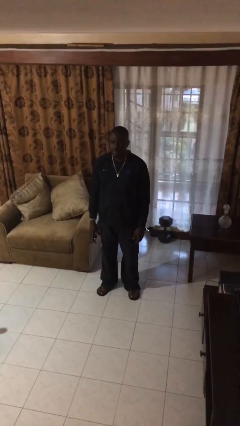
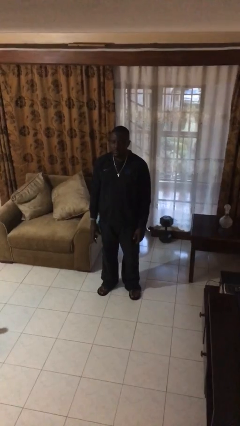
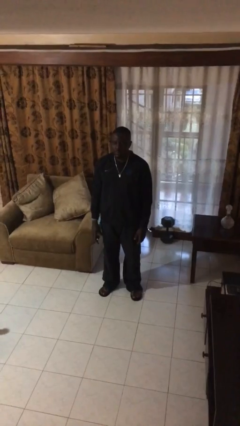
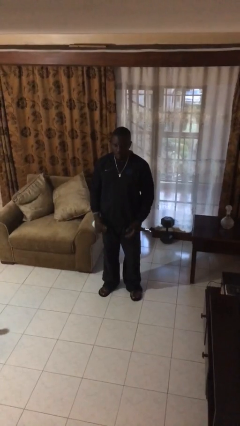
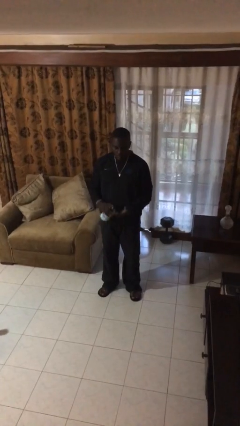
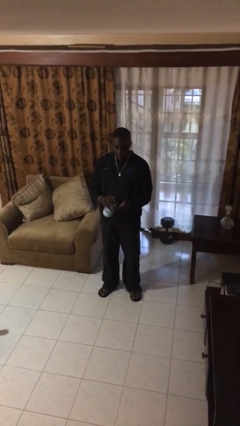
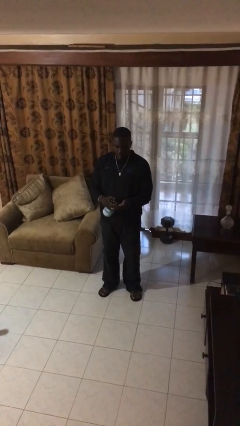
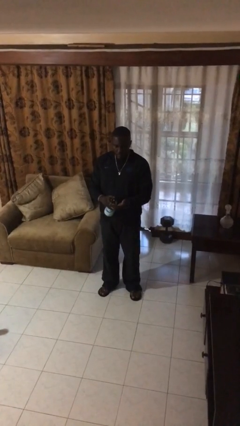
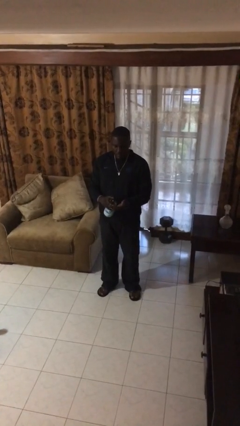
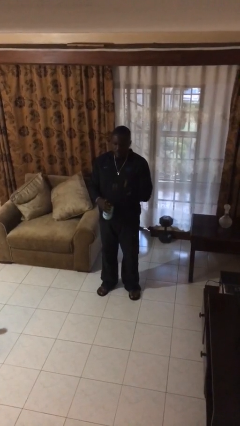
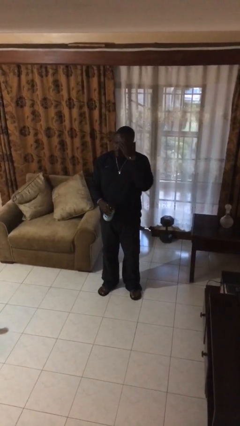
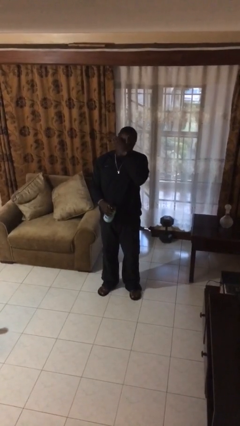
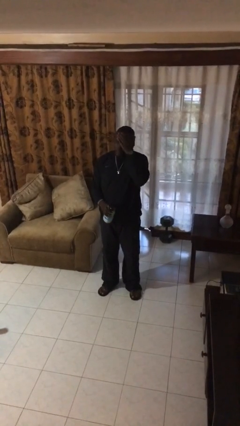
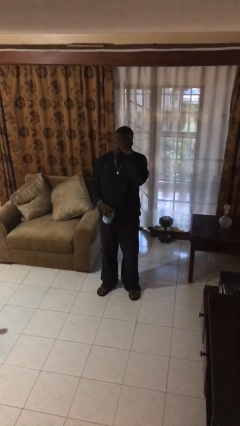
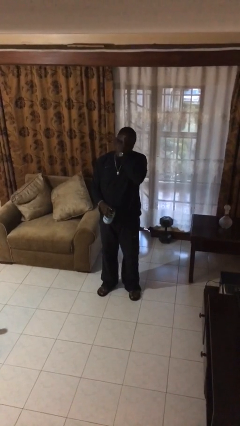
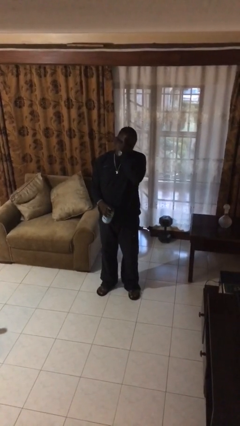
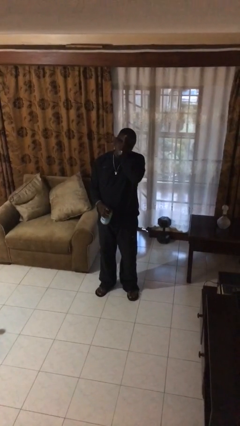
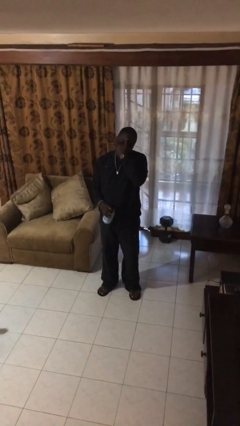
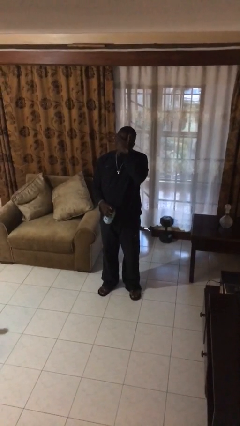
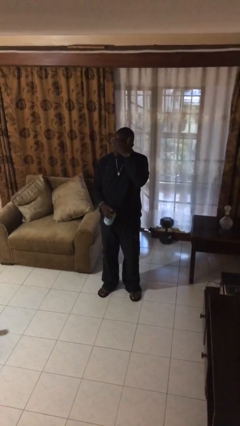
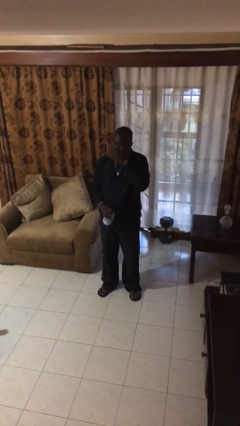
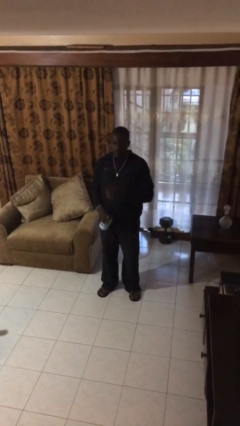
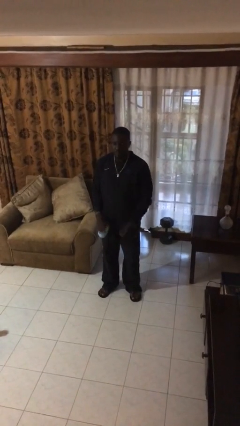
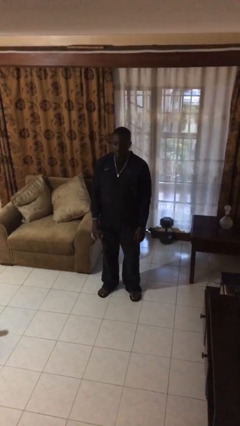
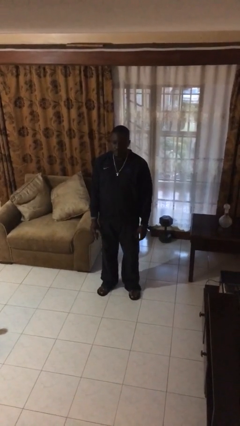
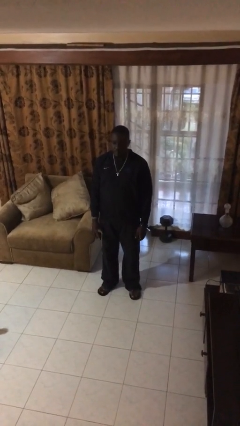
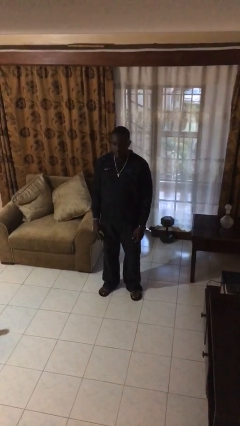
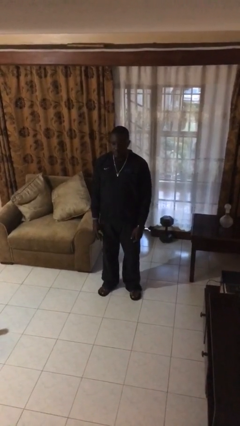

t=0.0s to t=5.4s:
person applies facial moisturizer

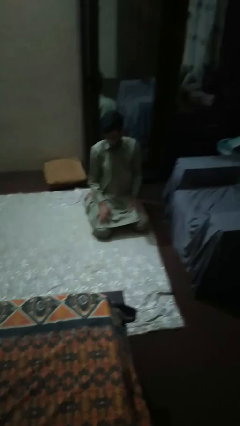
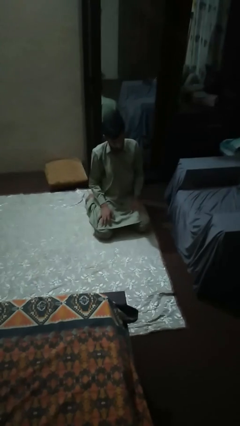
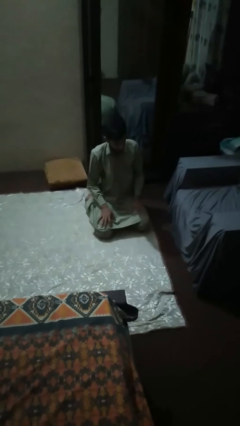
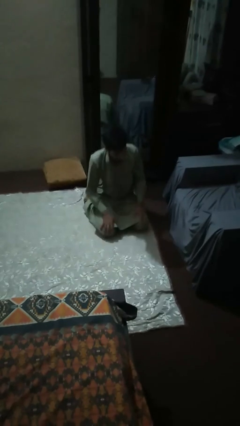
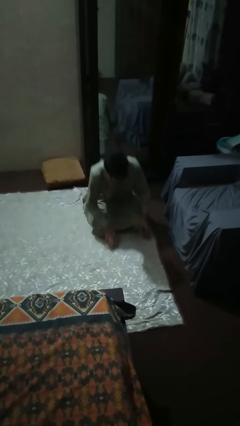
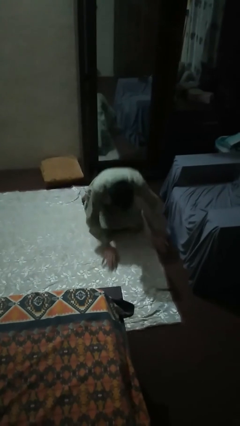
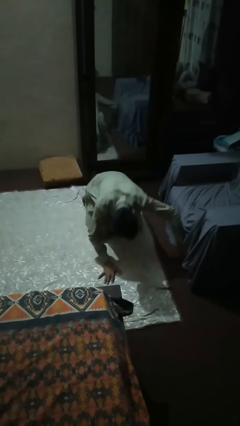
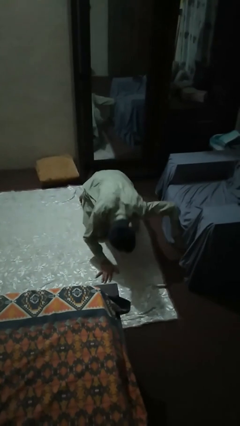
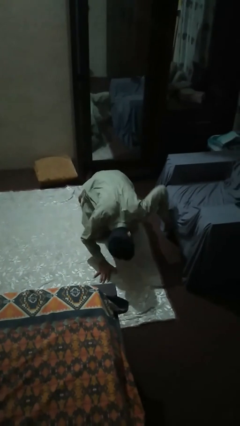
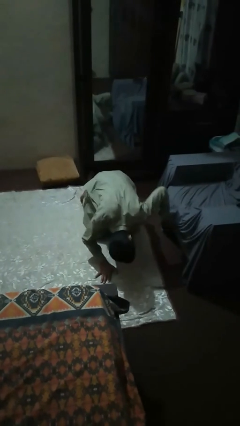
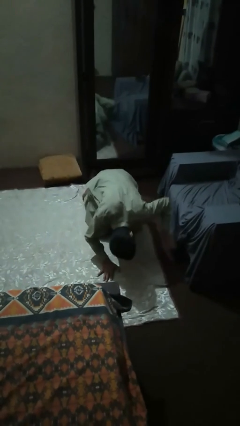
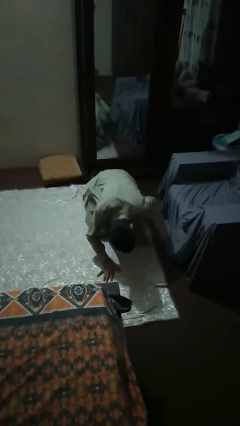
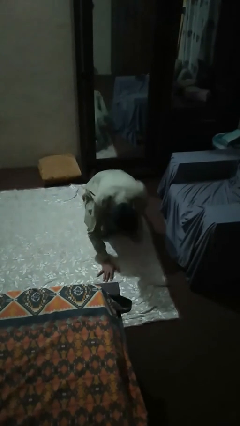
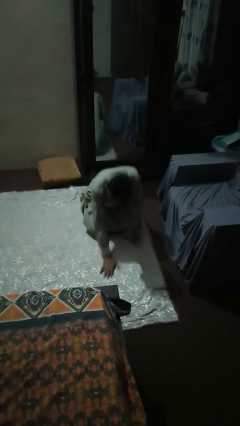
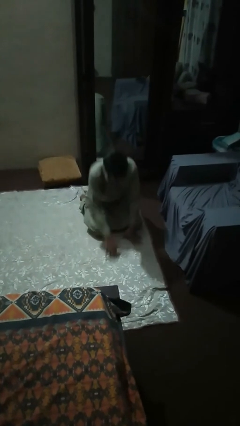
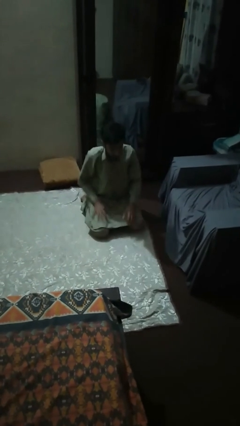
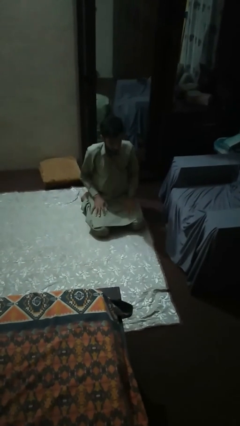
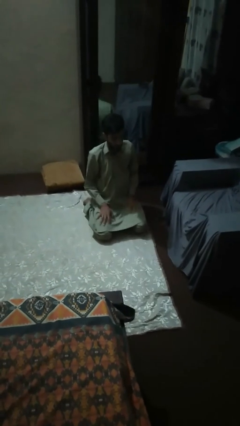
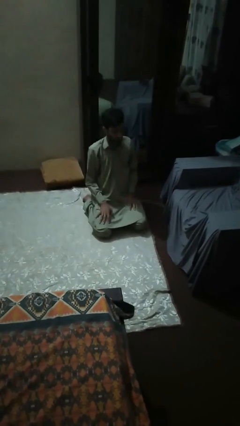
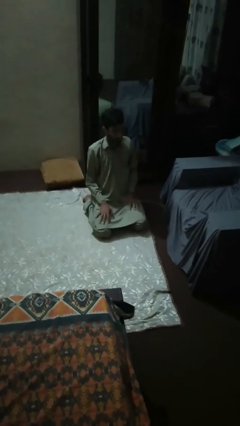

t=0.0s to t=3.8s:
person searches under couch

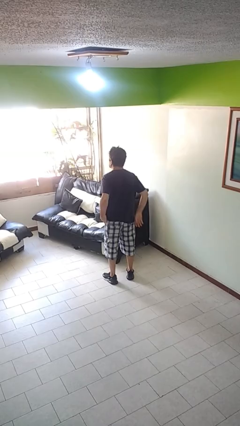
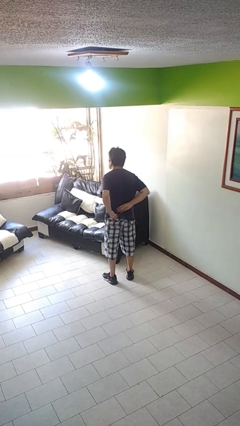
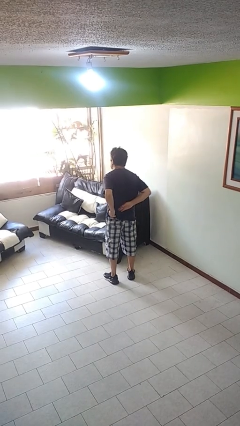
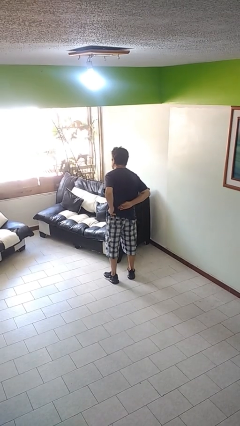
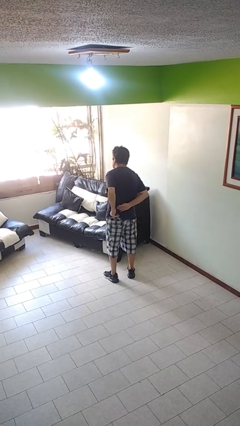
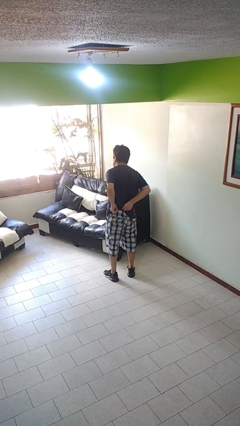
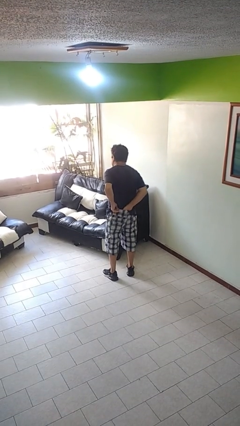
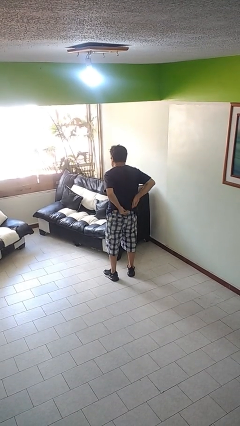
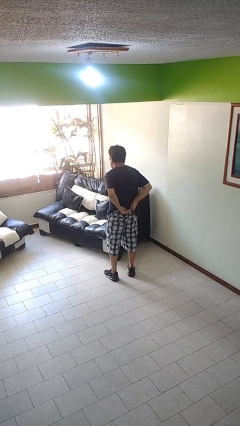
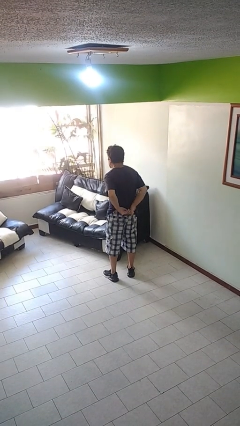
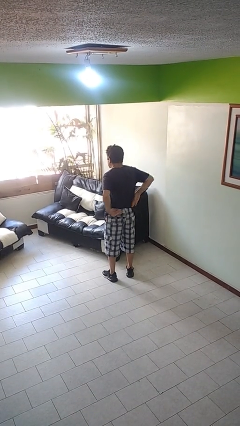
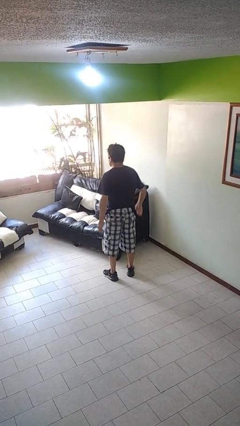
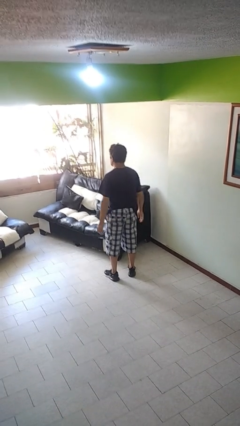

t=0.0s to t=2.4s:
person tucks in shirt

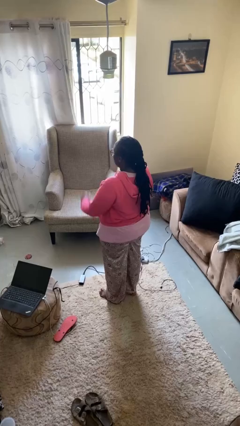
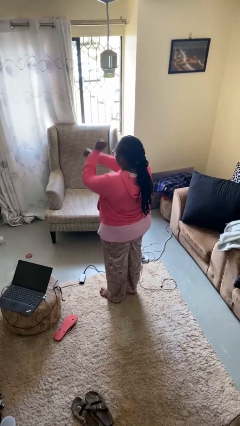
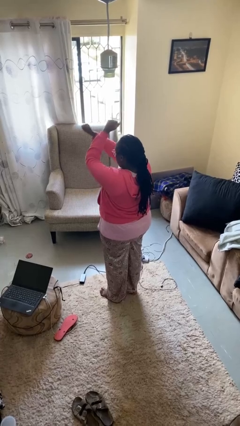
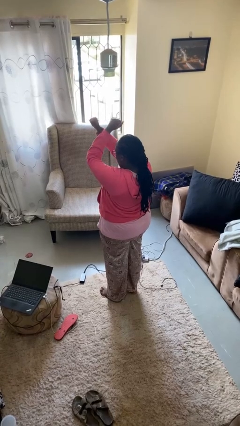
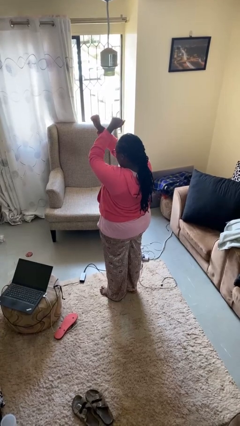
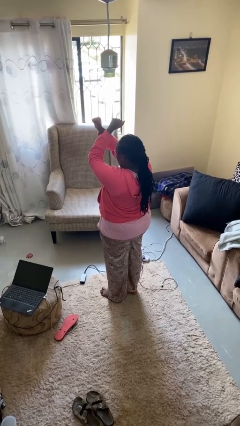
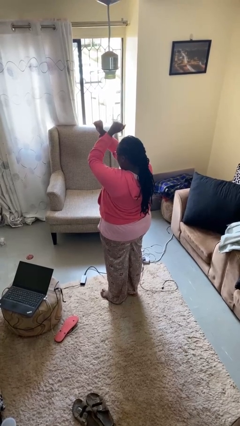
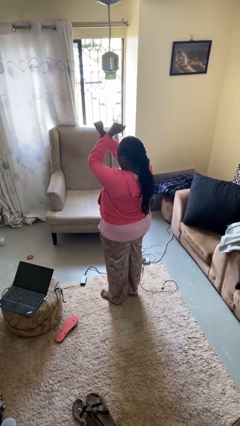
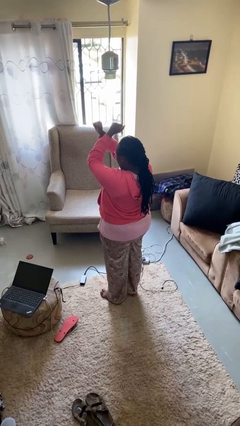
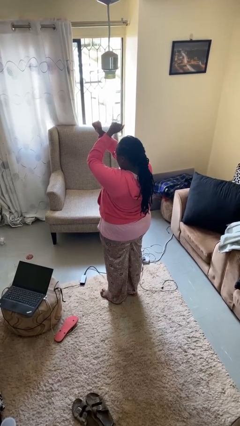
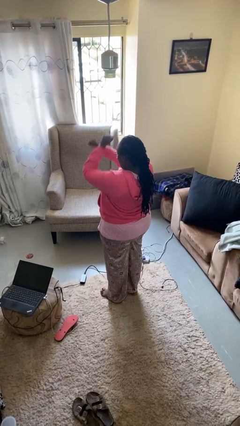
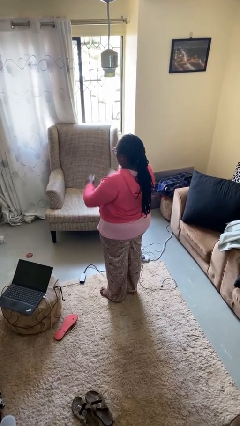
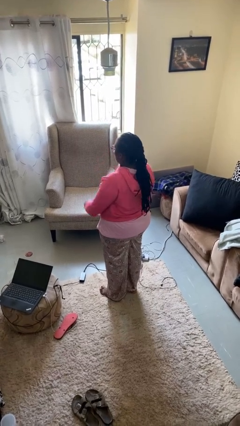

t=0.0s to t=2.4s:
person gestures arms x

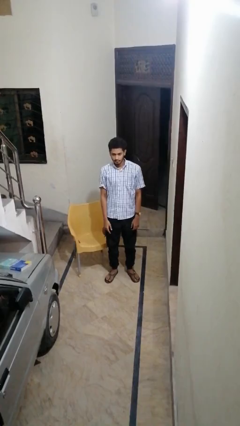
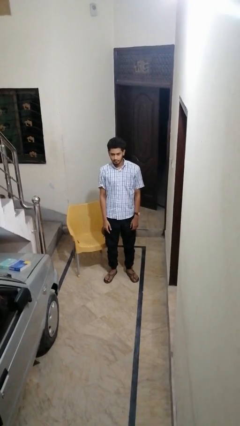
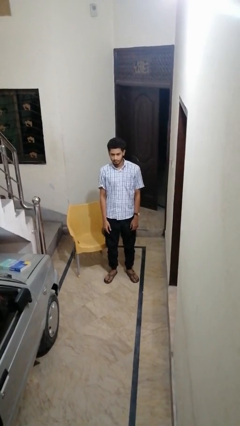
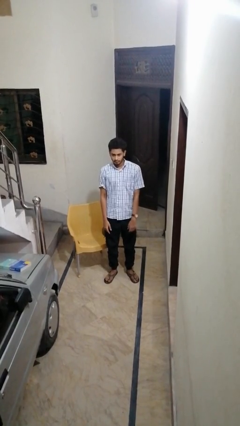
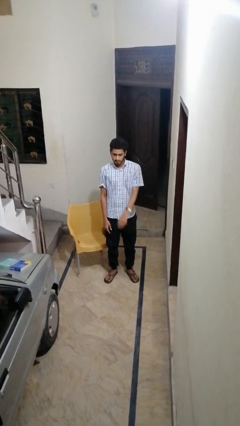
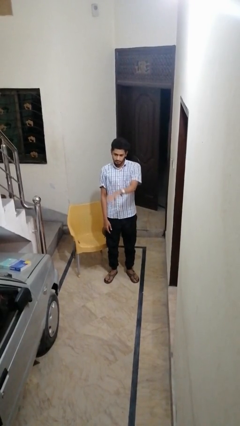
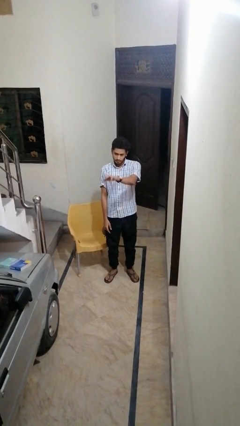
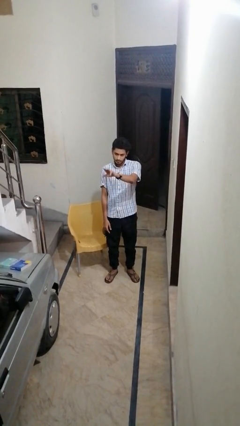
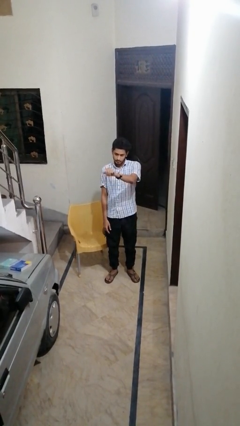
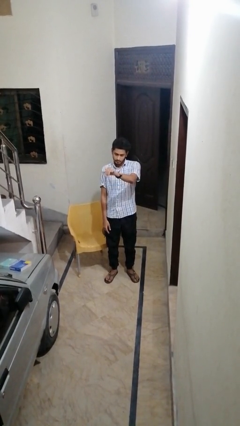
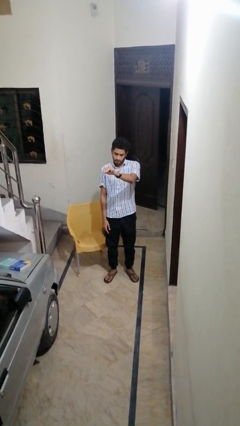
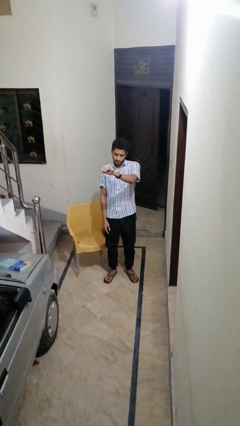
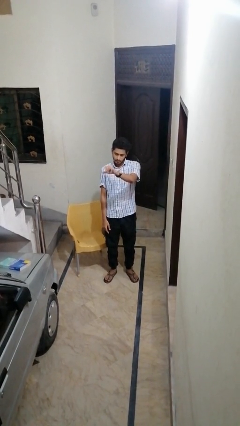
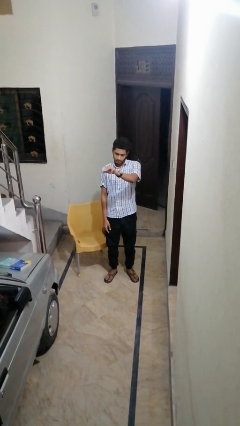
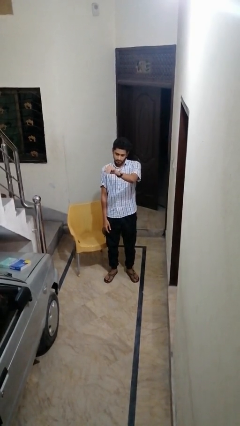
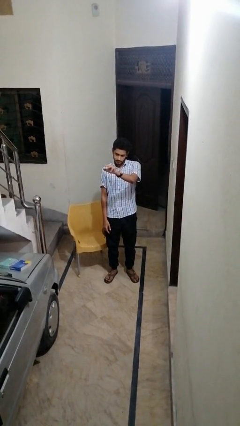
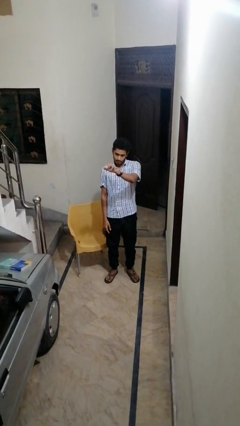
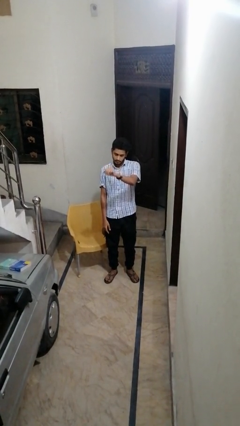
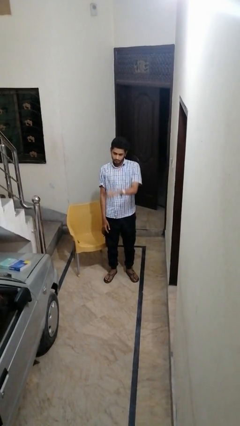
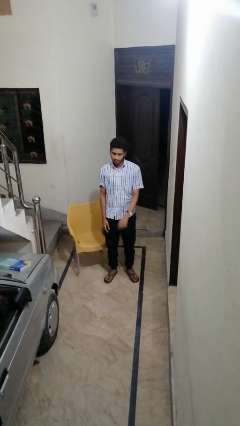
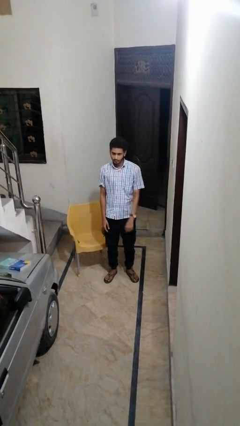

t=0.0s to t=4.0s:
person gestures come here
